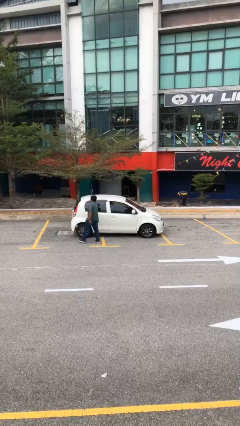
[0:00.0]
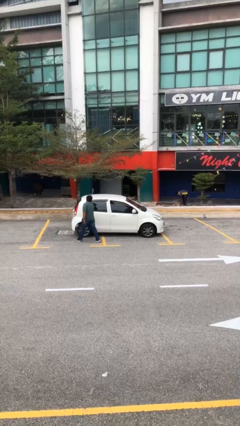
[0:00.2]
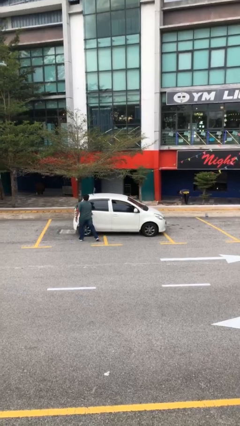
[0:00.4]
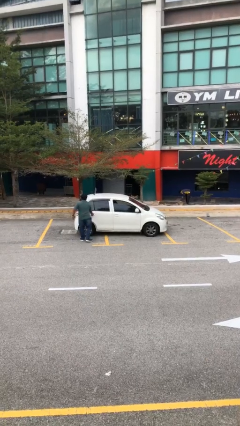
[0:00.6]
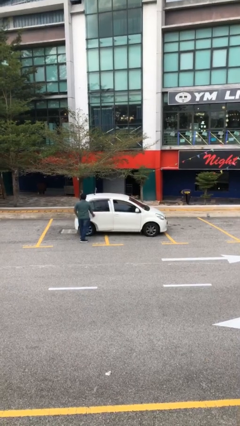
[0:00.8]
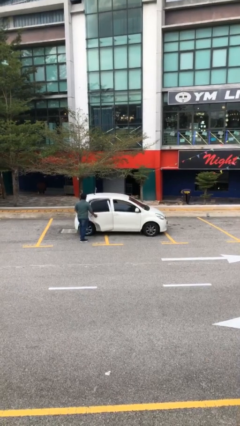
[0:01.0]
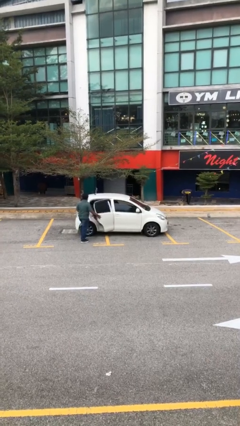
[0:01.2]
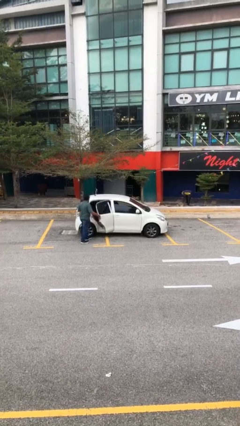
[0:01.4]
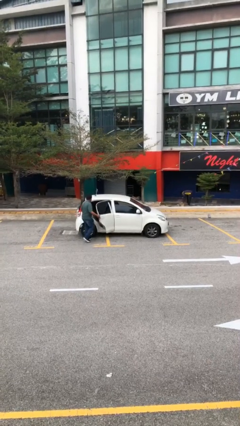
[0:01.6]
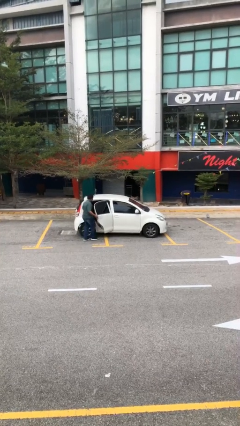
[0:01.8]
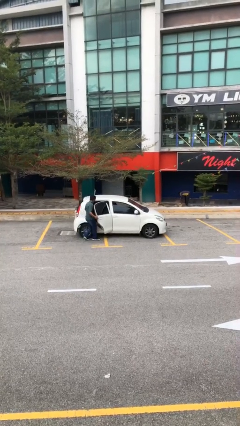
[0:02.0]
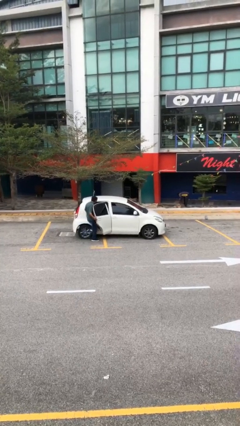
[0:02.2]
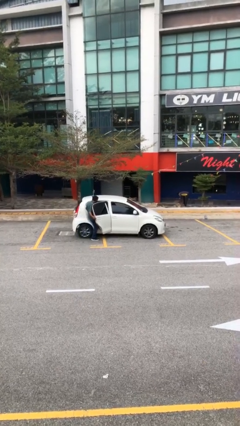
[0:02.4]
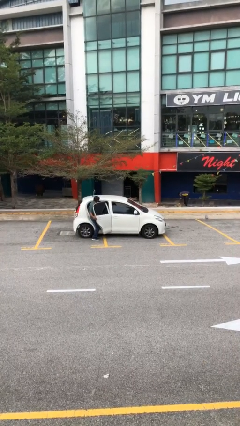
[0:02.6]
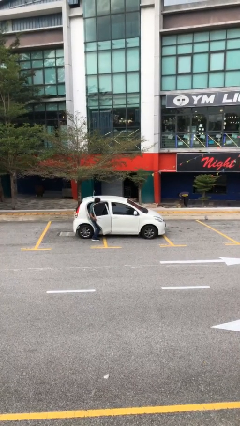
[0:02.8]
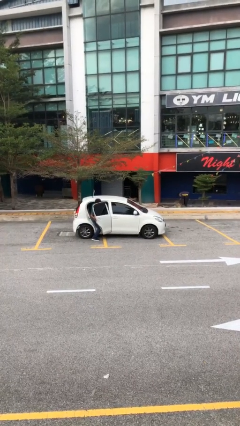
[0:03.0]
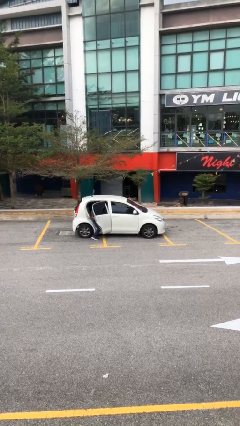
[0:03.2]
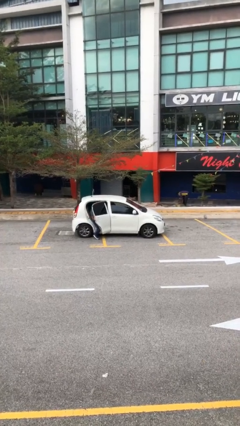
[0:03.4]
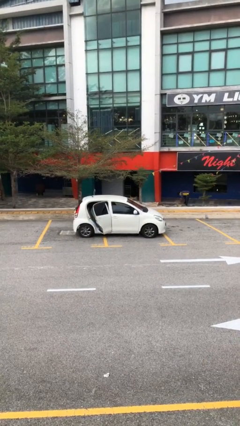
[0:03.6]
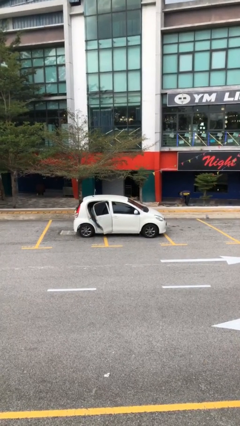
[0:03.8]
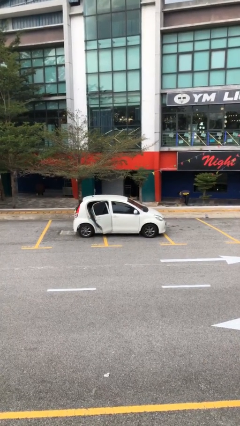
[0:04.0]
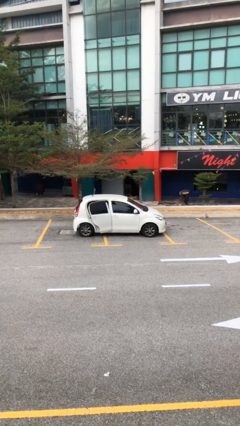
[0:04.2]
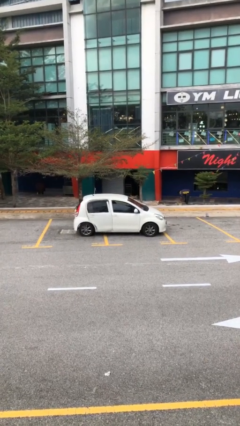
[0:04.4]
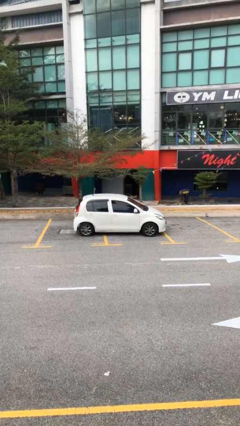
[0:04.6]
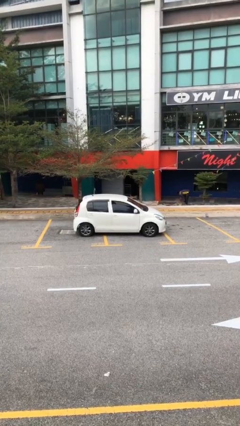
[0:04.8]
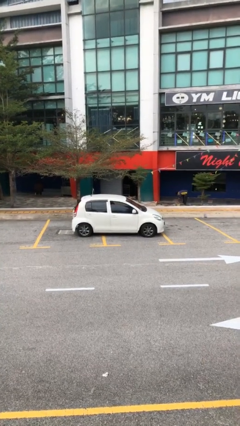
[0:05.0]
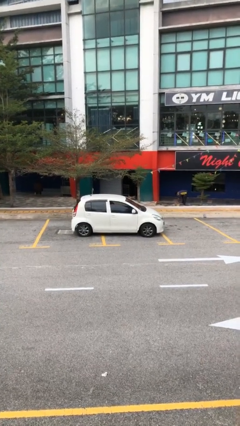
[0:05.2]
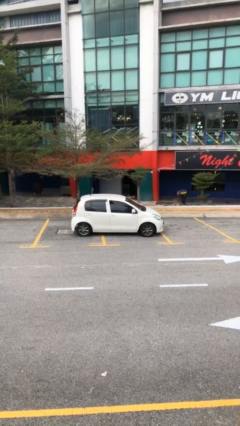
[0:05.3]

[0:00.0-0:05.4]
car picks up person

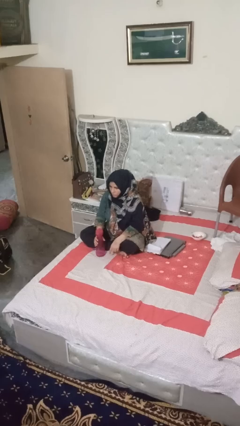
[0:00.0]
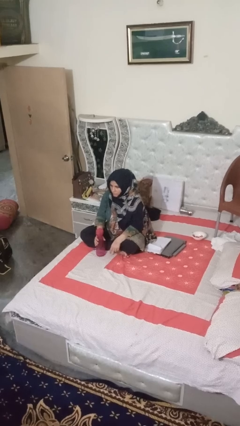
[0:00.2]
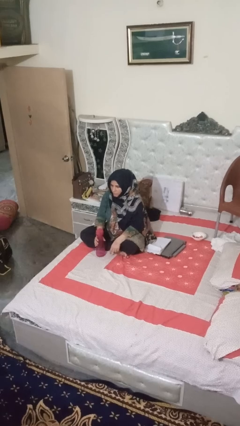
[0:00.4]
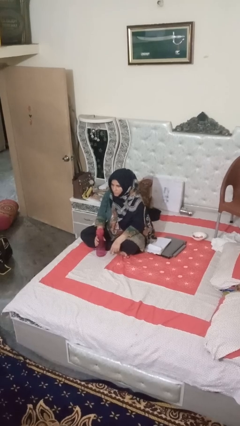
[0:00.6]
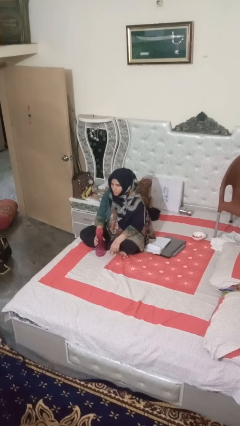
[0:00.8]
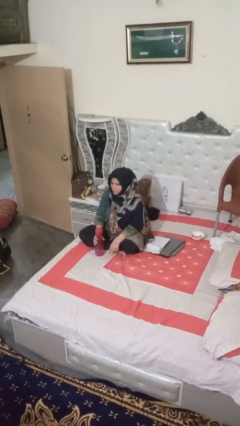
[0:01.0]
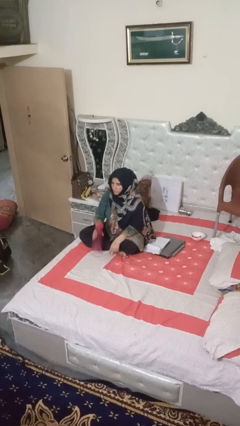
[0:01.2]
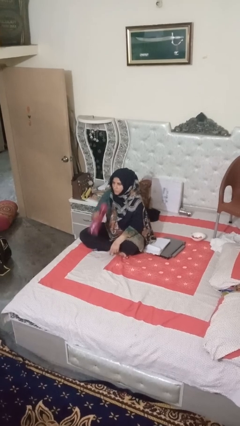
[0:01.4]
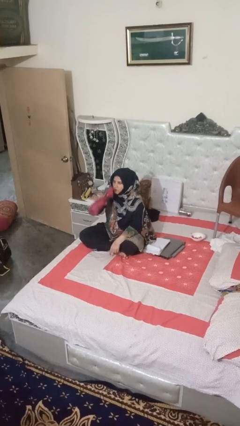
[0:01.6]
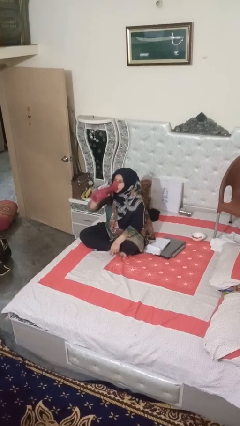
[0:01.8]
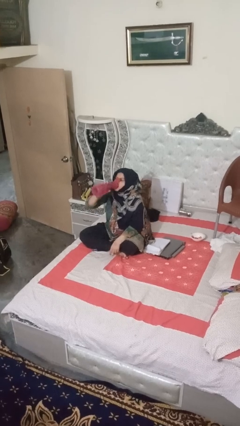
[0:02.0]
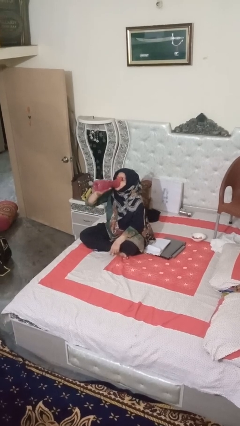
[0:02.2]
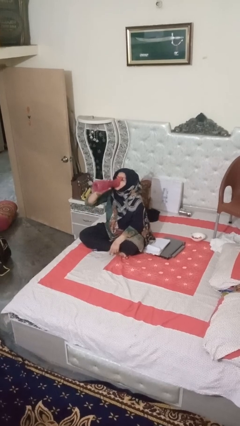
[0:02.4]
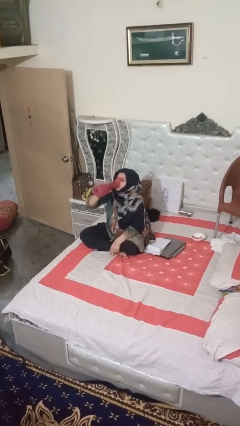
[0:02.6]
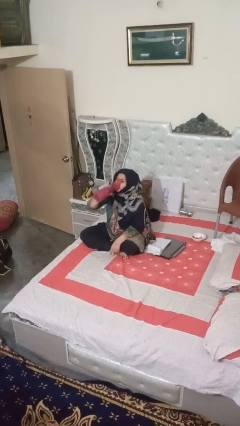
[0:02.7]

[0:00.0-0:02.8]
person drinks from bottle

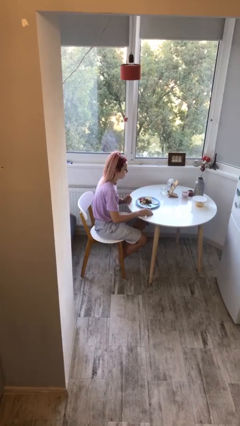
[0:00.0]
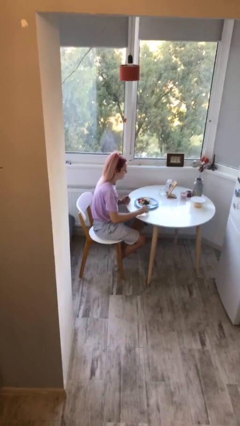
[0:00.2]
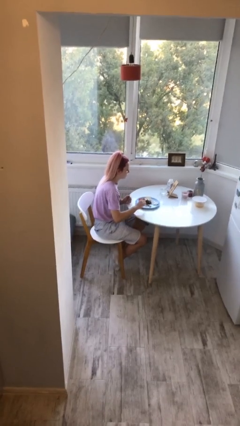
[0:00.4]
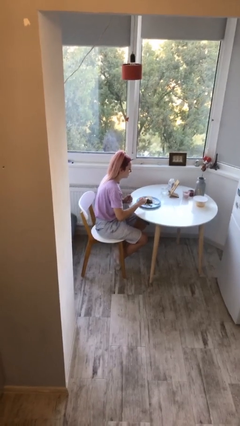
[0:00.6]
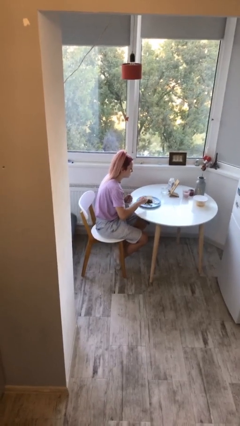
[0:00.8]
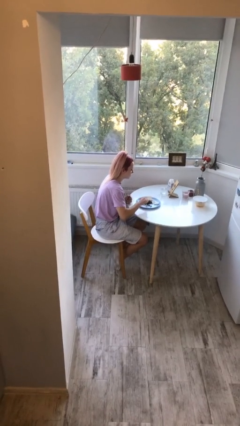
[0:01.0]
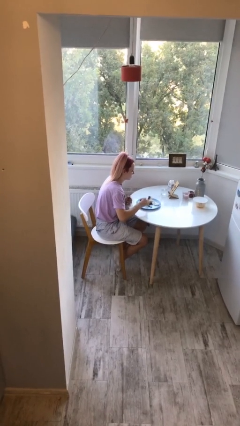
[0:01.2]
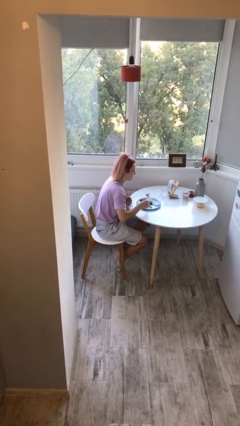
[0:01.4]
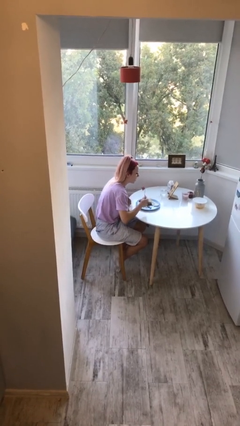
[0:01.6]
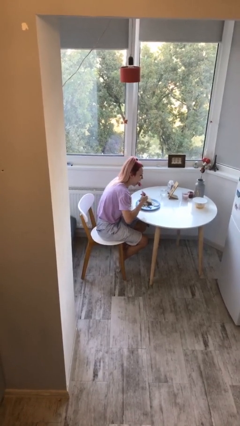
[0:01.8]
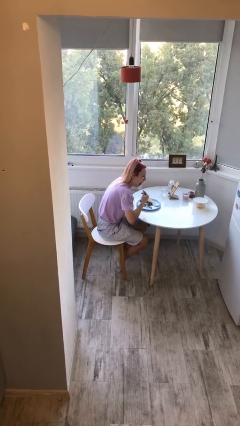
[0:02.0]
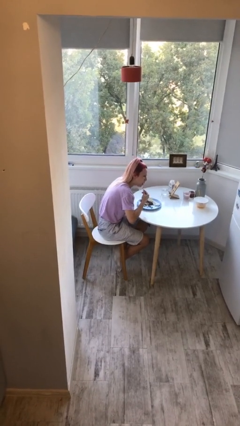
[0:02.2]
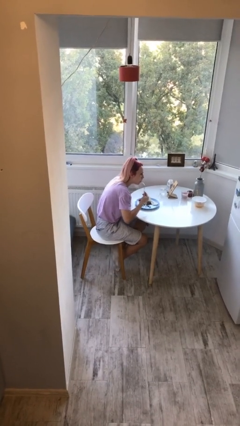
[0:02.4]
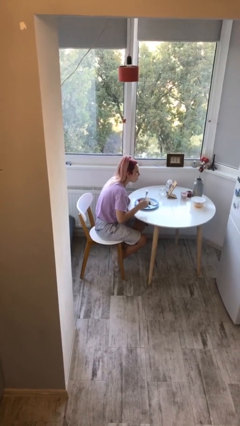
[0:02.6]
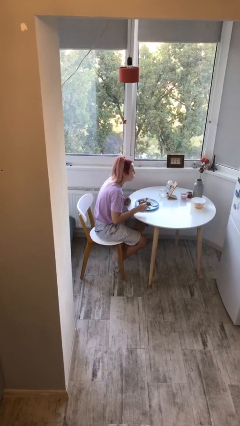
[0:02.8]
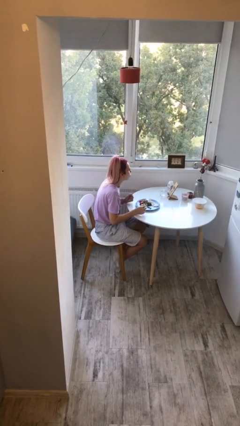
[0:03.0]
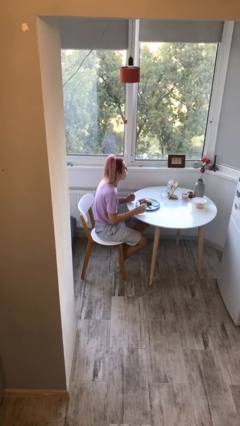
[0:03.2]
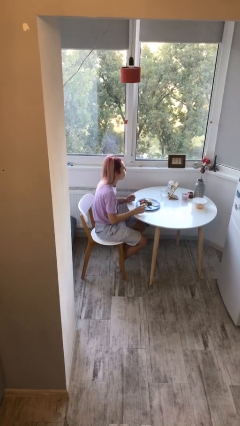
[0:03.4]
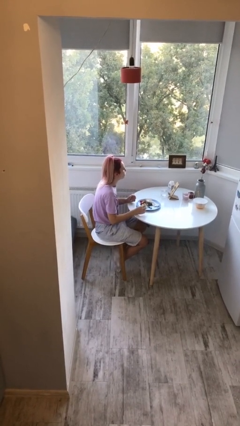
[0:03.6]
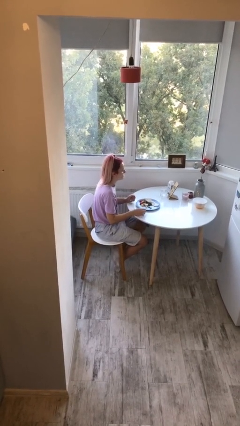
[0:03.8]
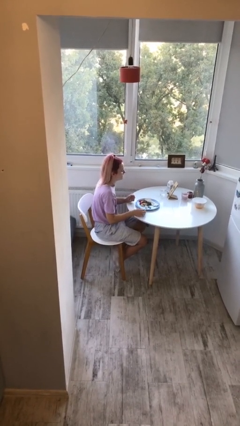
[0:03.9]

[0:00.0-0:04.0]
person eats with utensil

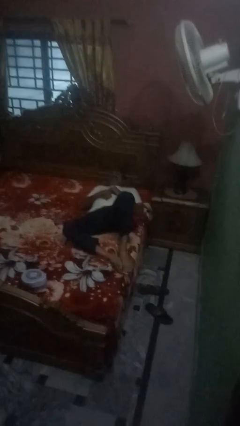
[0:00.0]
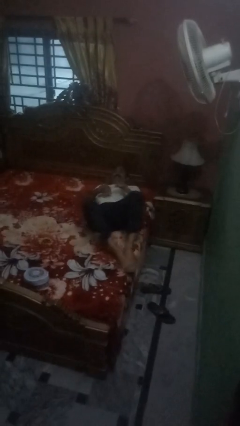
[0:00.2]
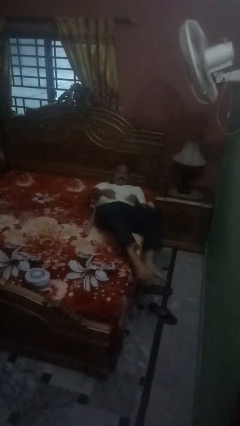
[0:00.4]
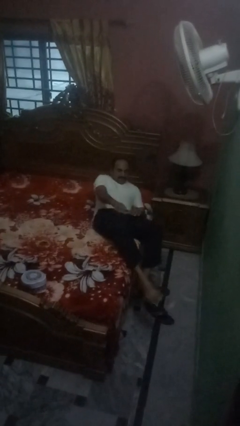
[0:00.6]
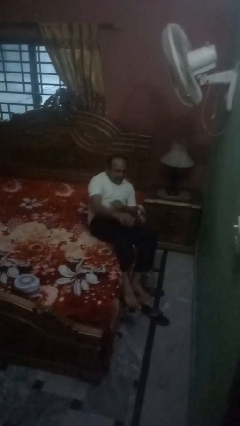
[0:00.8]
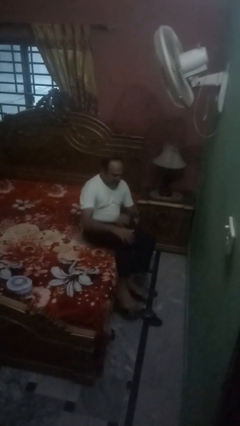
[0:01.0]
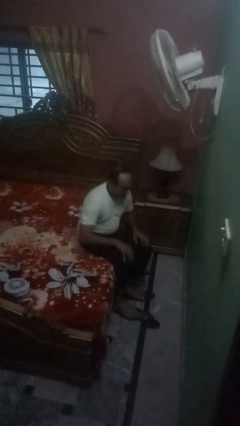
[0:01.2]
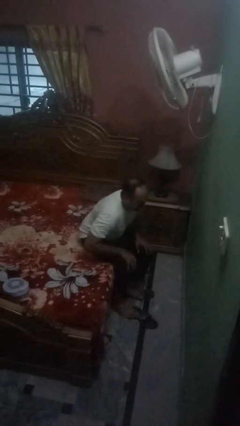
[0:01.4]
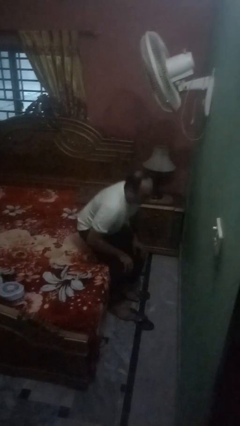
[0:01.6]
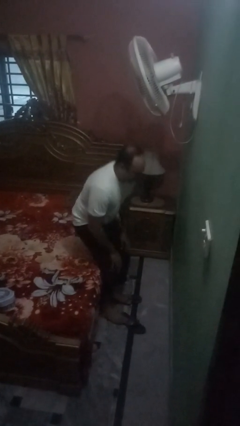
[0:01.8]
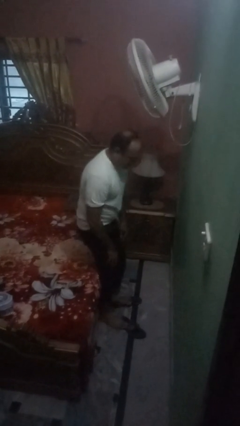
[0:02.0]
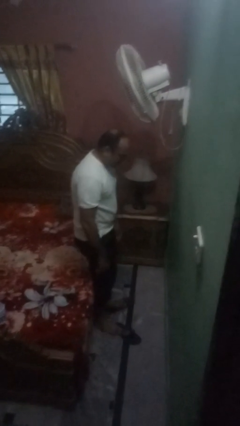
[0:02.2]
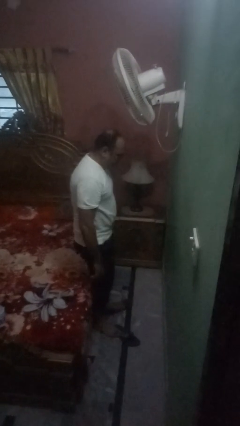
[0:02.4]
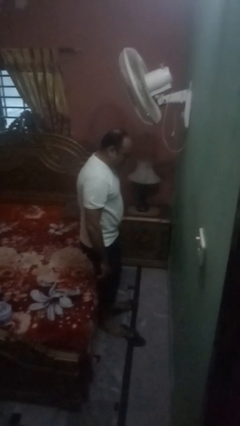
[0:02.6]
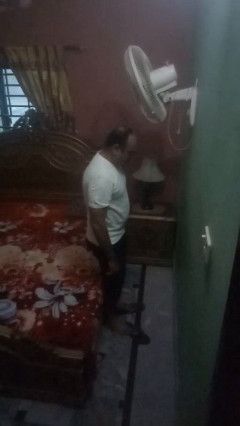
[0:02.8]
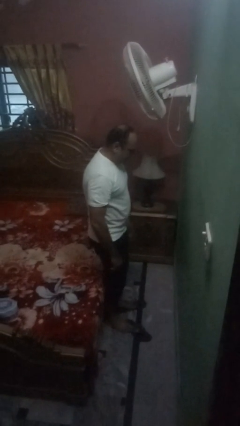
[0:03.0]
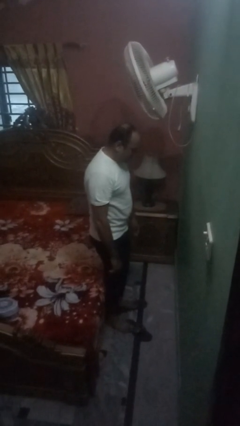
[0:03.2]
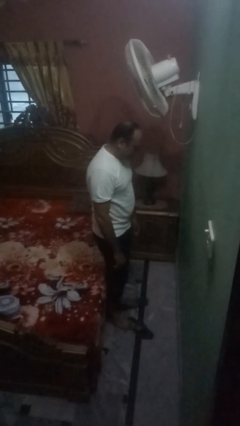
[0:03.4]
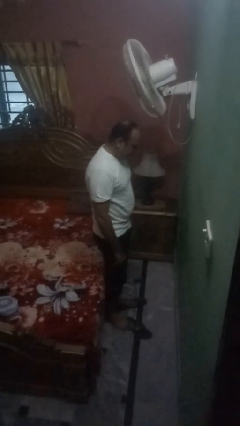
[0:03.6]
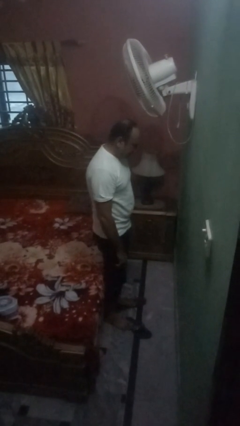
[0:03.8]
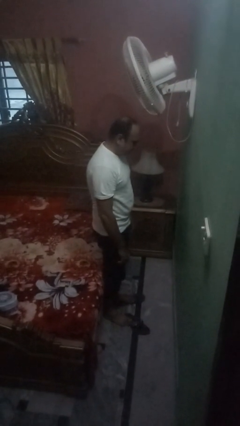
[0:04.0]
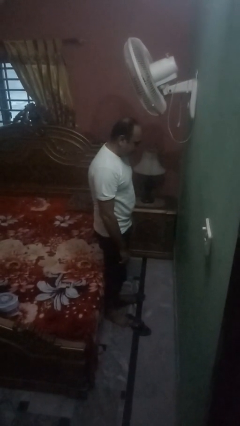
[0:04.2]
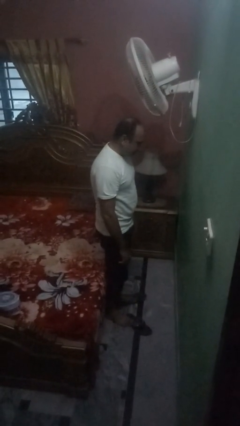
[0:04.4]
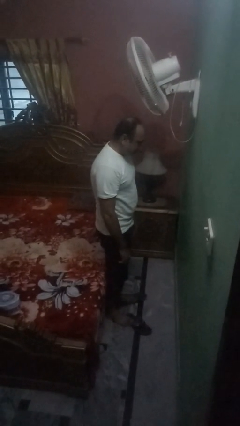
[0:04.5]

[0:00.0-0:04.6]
person stands up

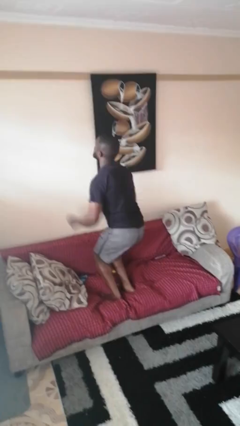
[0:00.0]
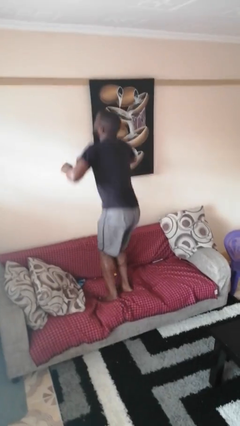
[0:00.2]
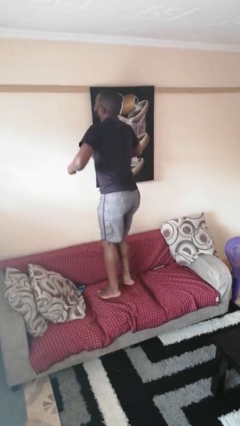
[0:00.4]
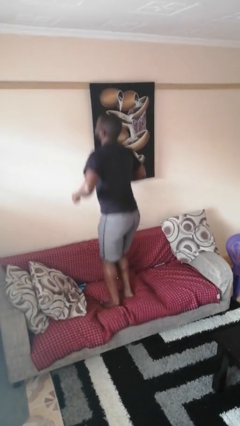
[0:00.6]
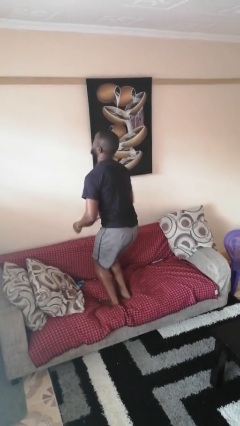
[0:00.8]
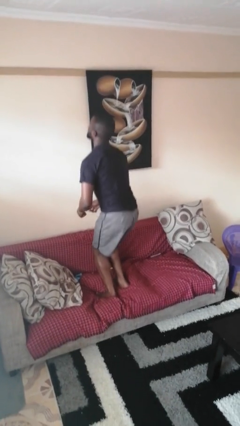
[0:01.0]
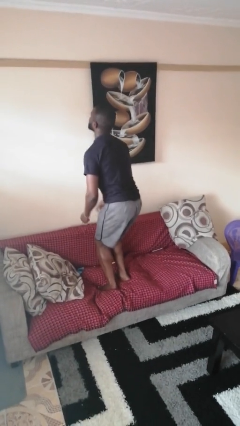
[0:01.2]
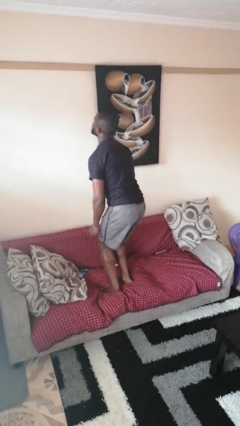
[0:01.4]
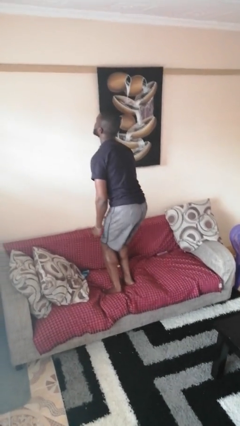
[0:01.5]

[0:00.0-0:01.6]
person jumps on couch
